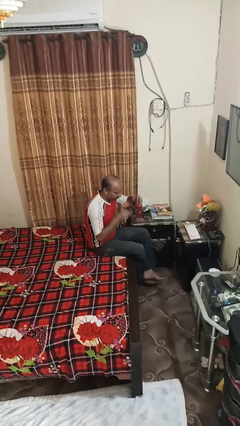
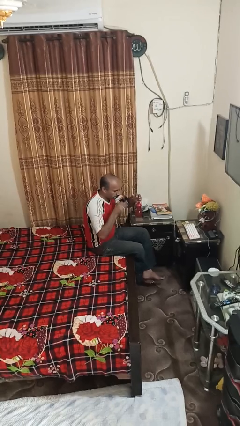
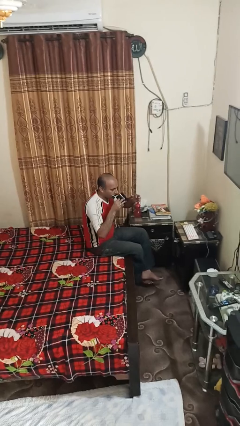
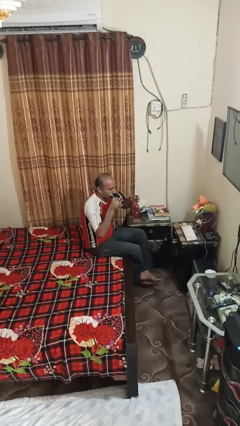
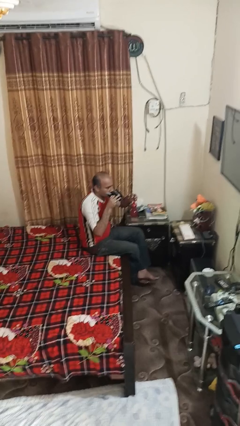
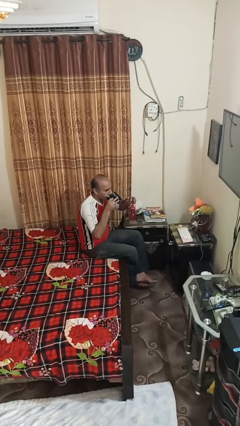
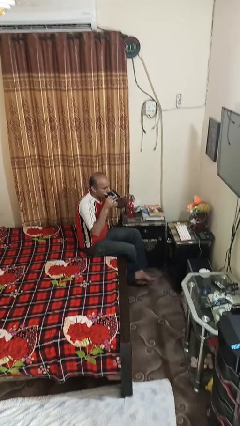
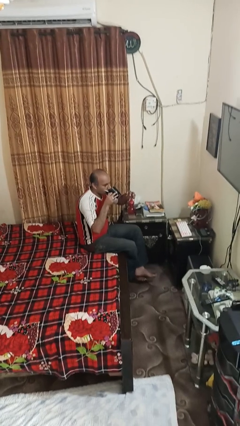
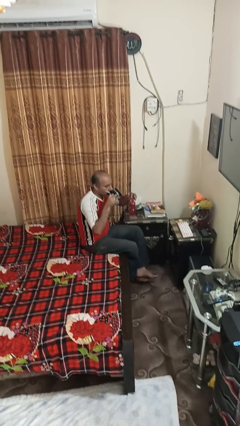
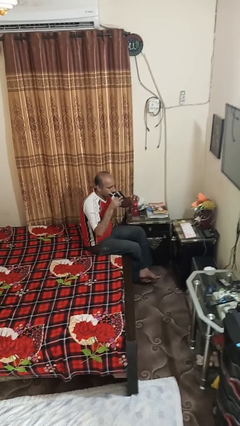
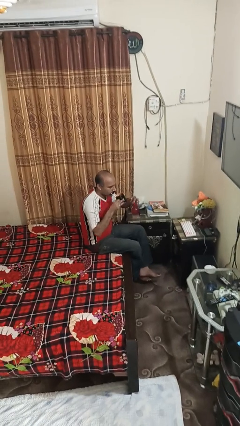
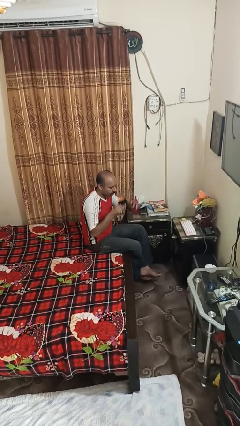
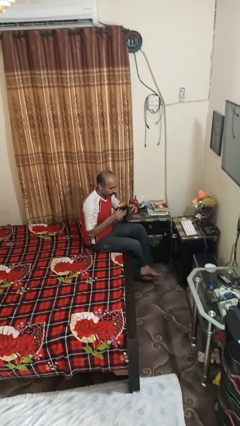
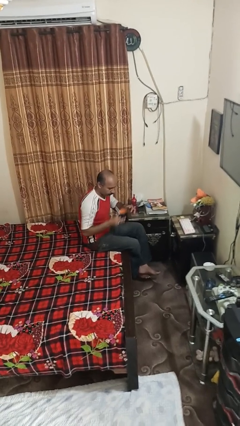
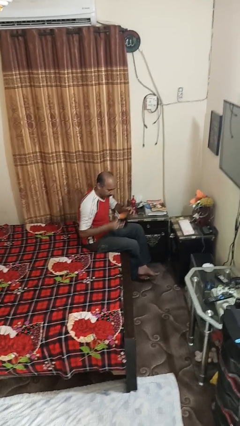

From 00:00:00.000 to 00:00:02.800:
person drinks from mug

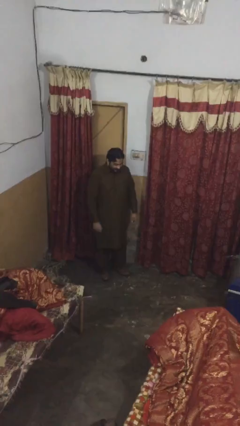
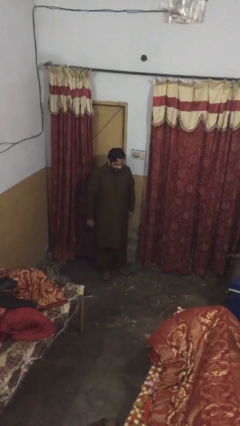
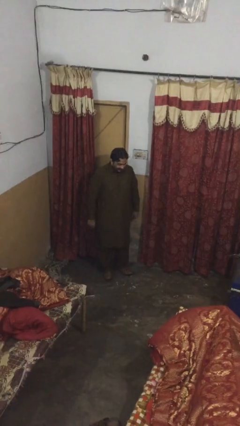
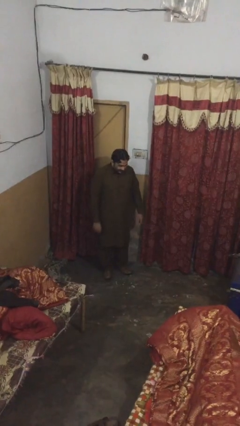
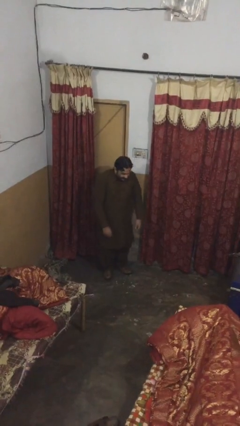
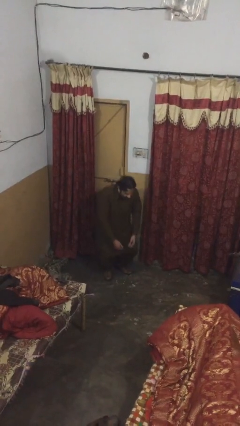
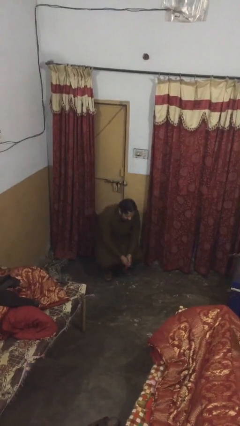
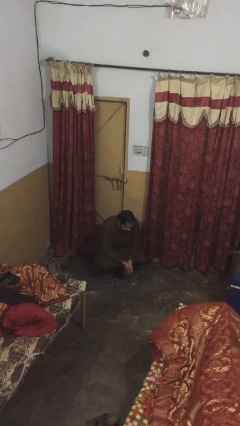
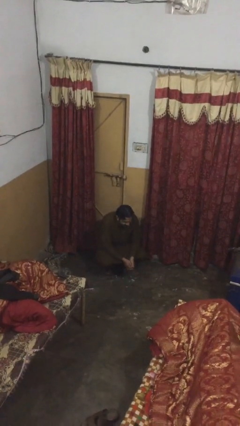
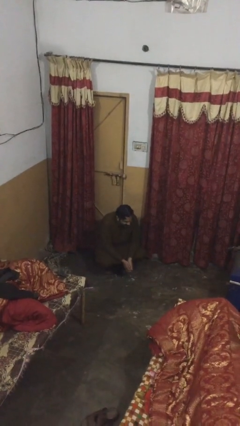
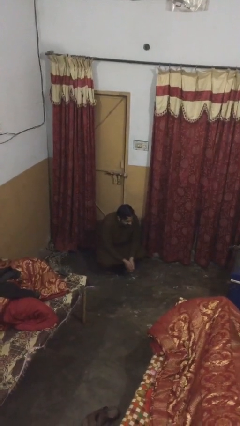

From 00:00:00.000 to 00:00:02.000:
person sits down

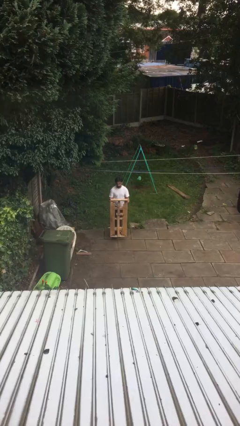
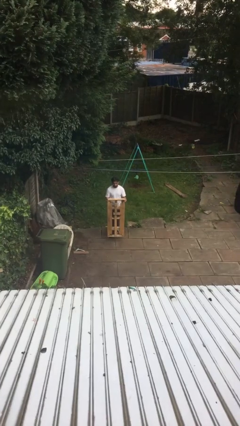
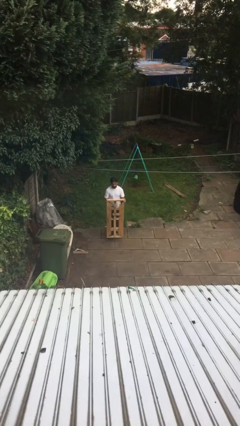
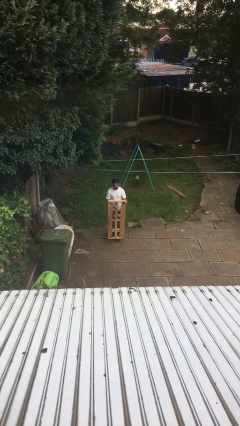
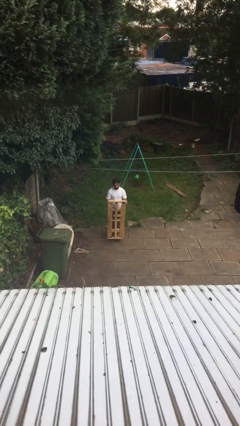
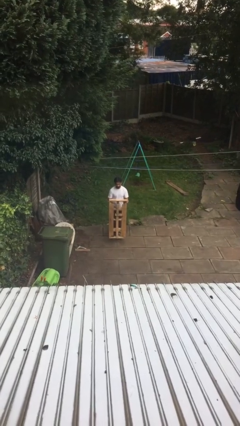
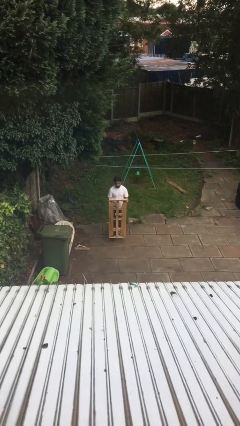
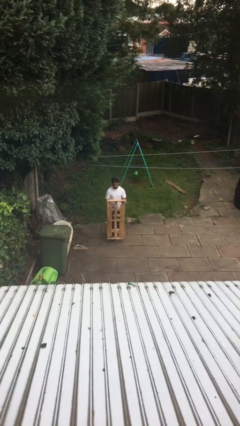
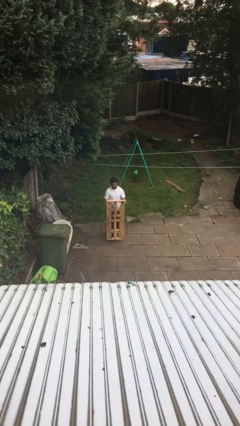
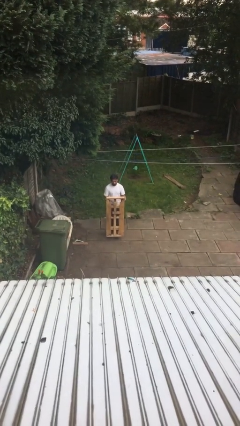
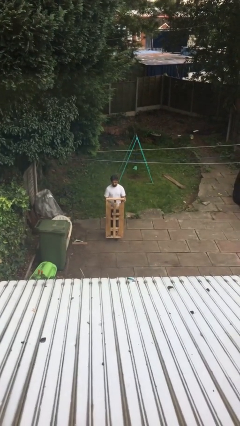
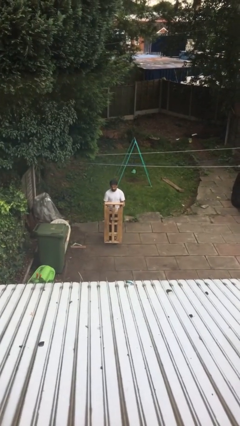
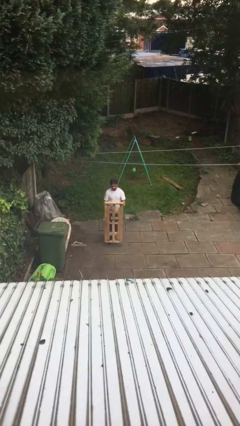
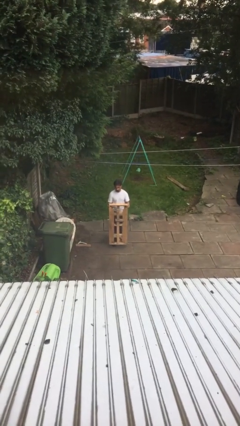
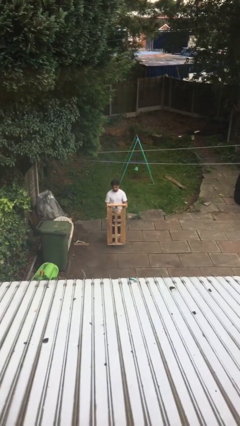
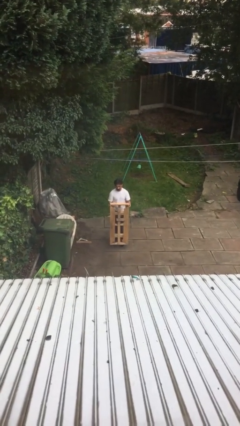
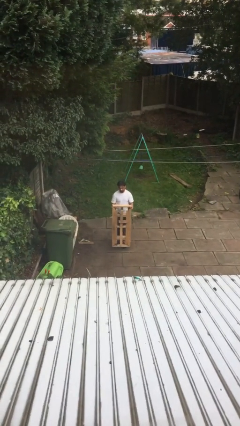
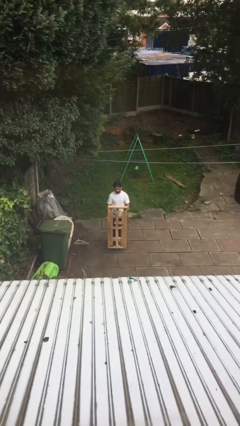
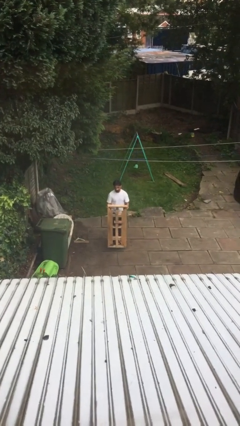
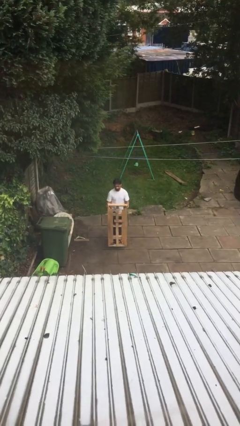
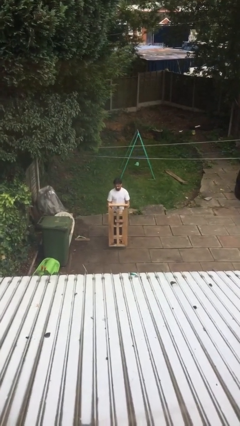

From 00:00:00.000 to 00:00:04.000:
person carries heavy object

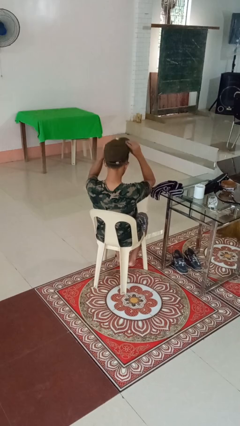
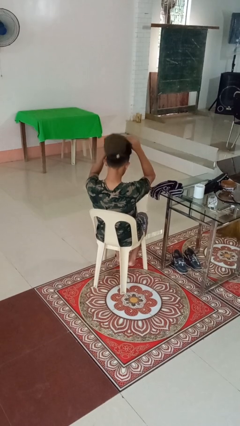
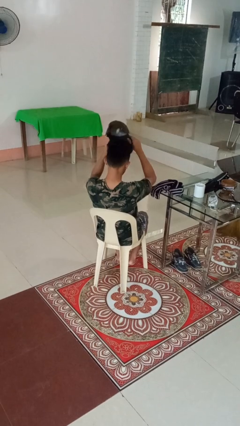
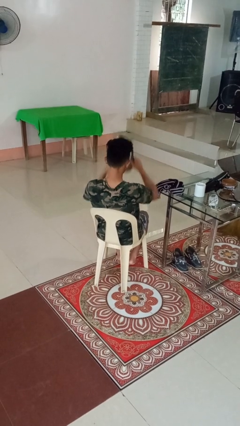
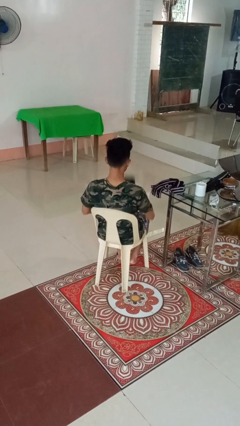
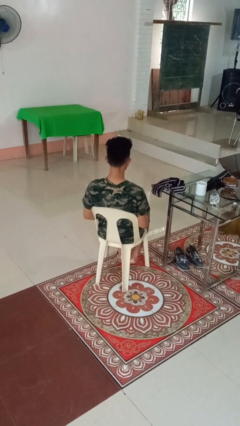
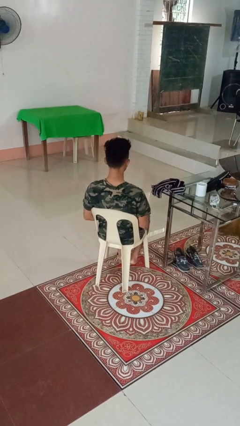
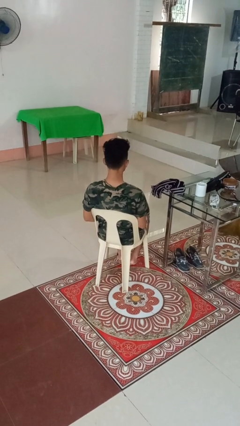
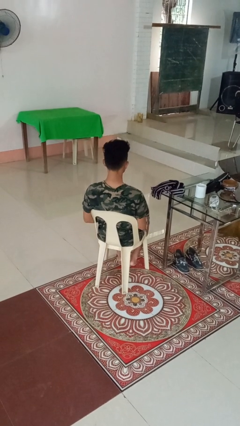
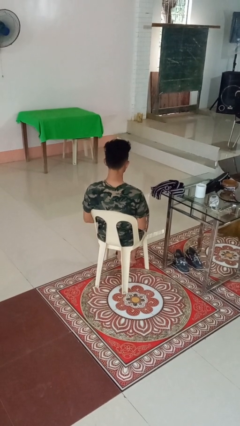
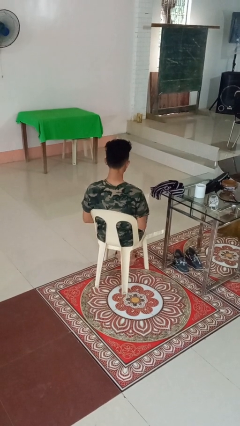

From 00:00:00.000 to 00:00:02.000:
person takes off hat

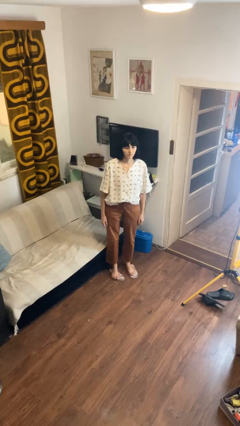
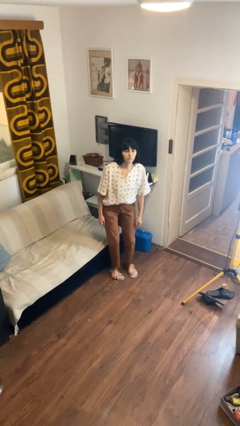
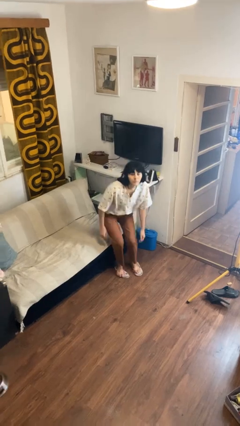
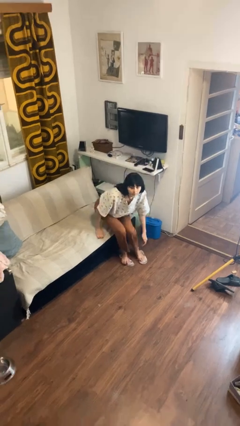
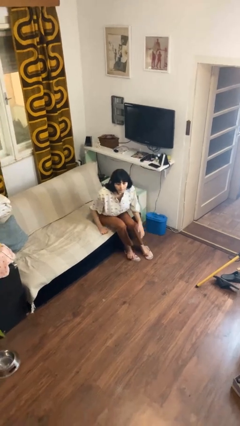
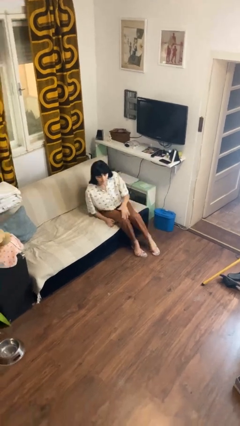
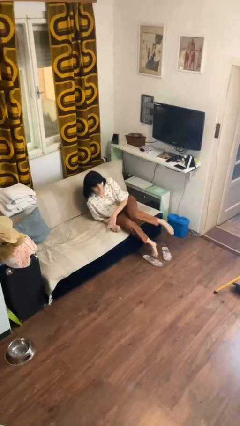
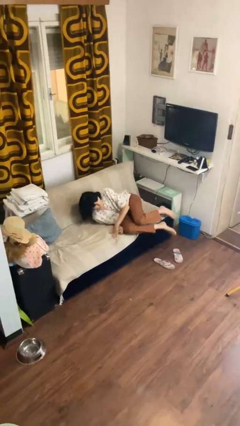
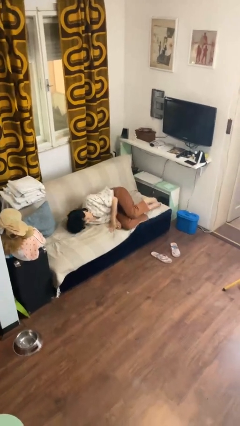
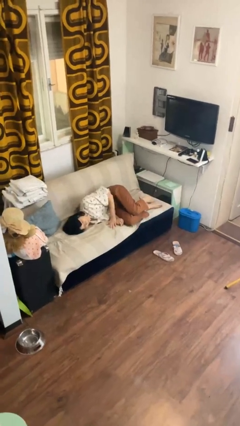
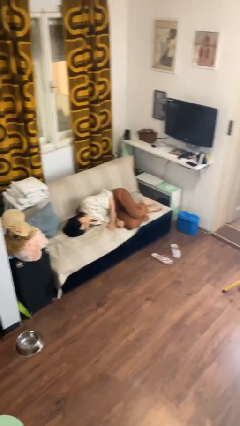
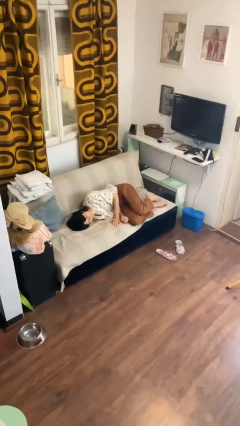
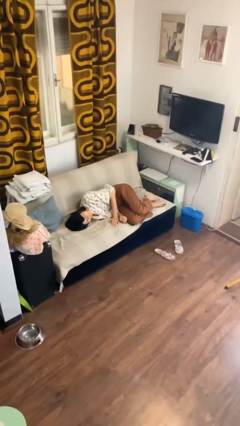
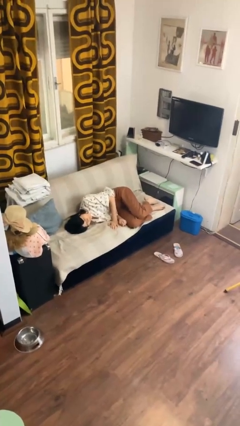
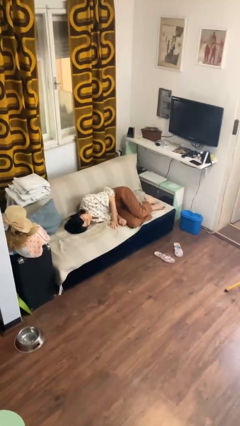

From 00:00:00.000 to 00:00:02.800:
person lies down on couch

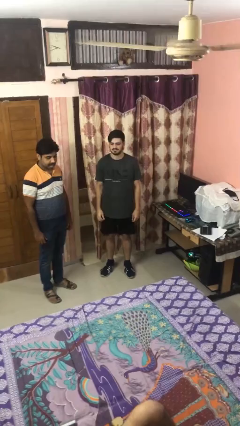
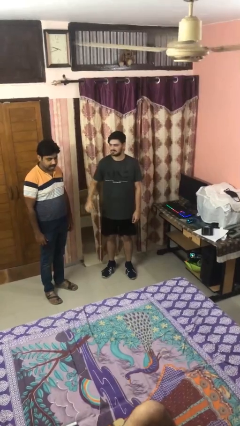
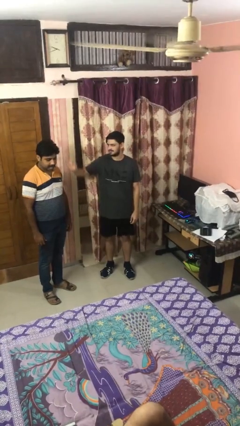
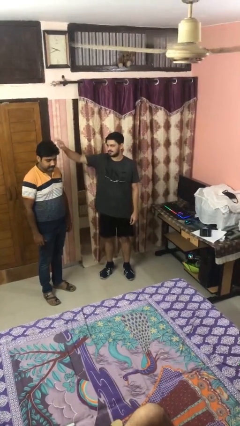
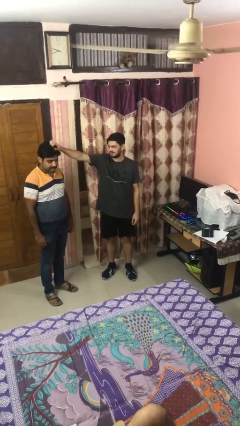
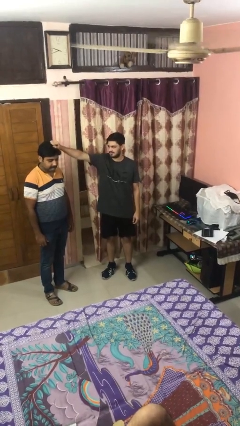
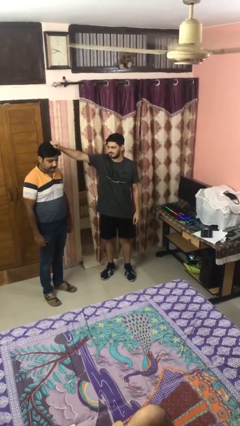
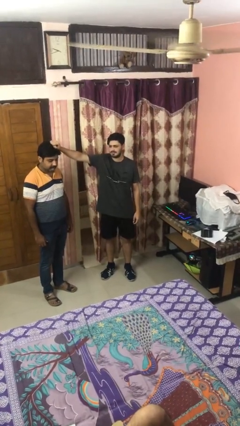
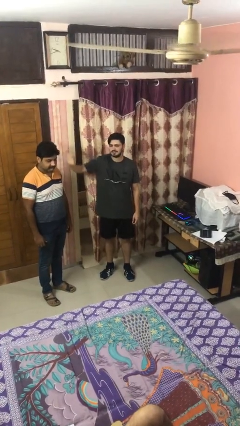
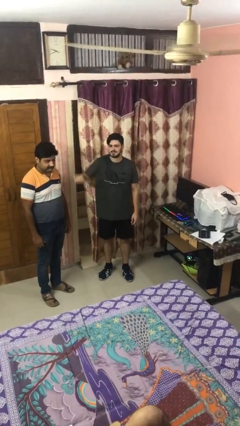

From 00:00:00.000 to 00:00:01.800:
person grabs person by hair

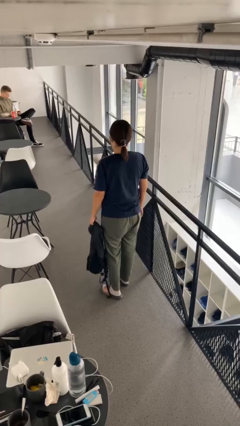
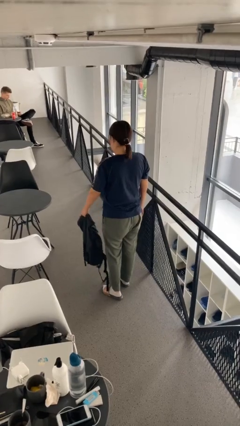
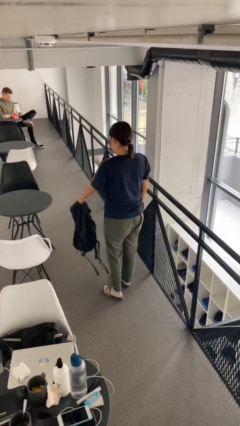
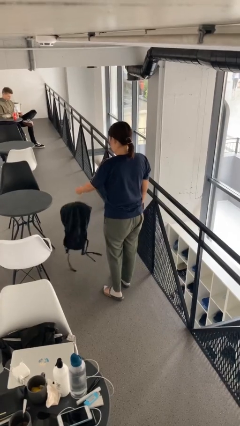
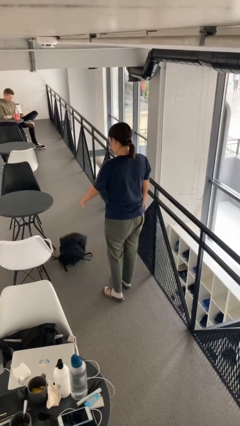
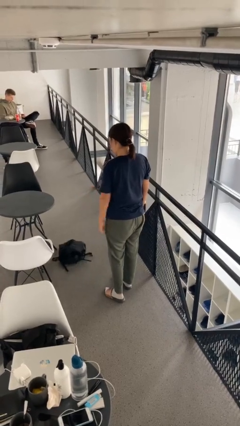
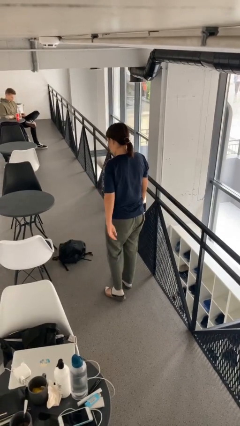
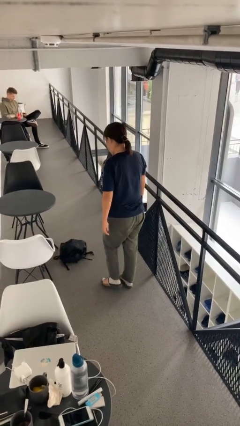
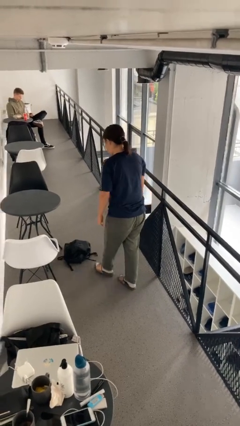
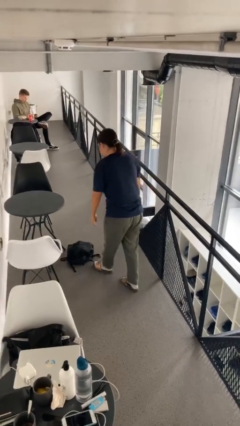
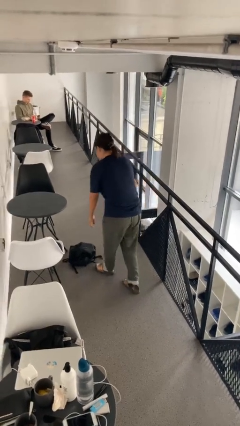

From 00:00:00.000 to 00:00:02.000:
person throws object to ground
